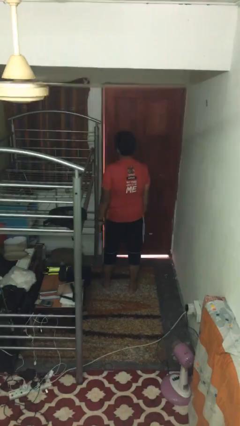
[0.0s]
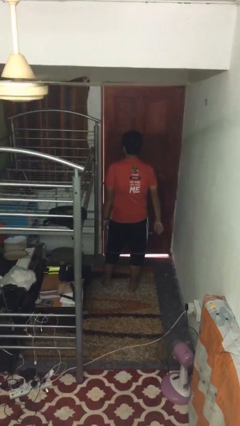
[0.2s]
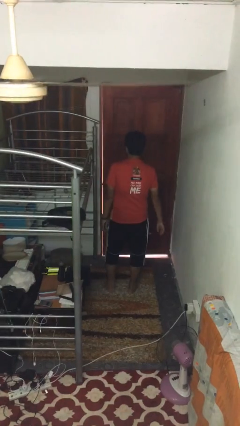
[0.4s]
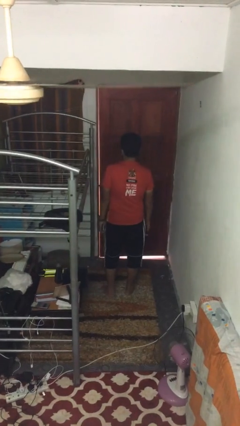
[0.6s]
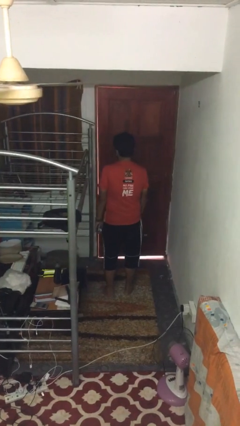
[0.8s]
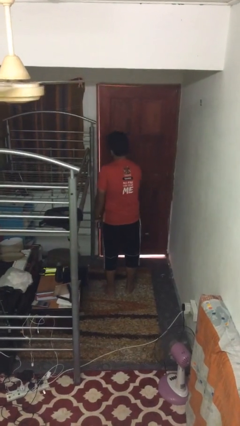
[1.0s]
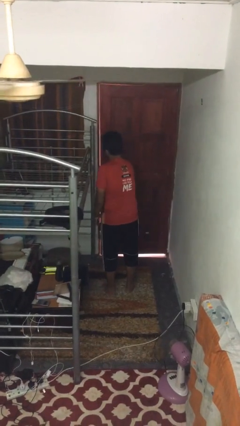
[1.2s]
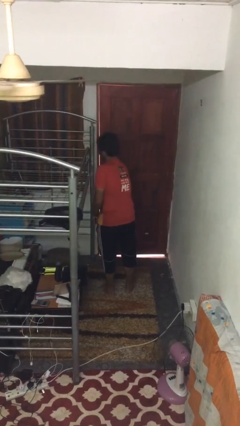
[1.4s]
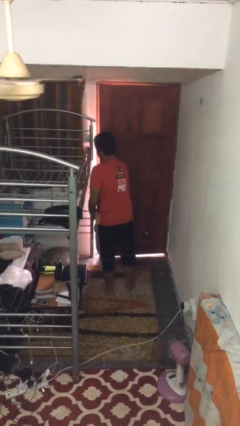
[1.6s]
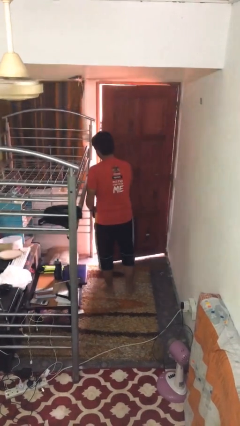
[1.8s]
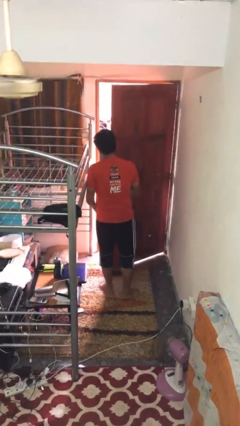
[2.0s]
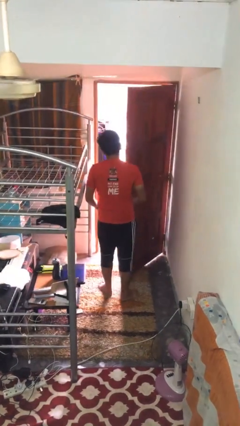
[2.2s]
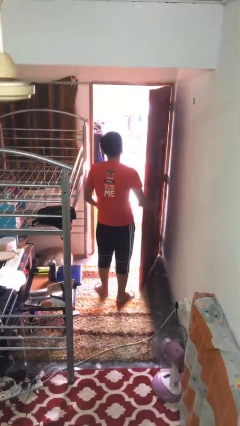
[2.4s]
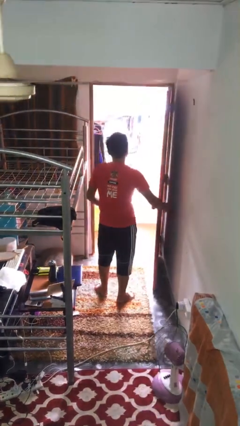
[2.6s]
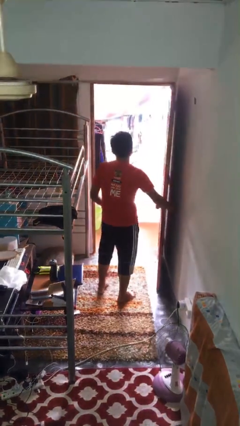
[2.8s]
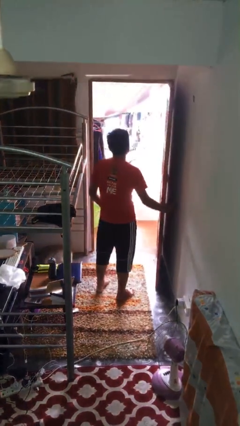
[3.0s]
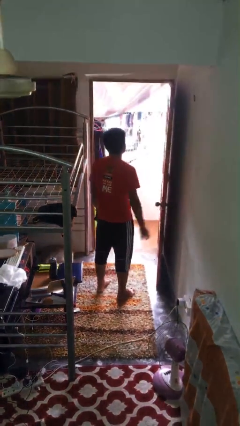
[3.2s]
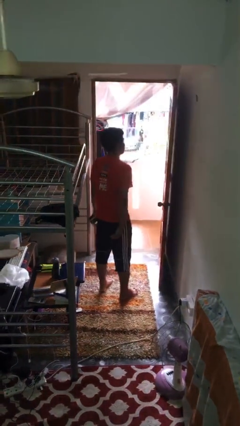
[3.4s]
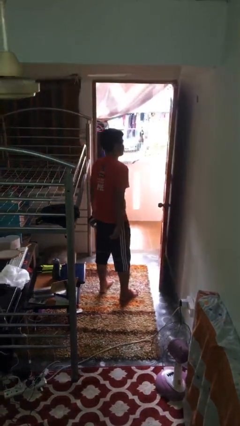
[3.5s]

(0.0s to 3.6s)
person opens facility door

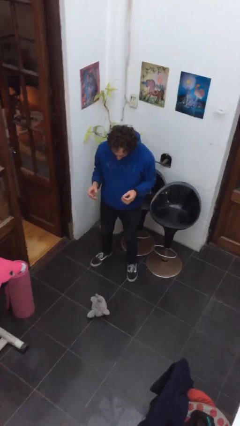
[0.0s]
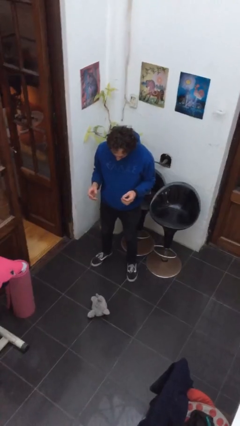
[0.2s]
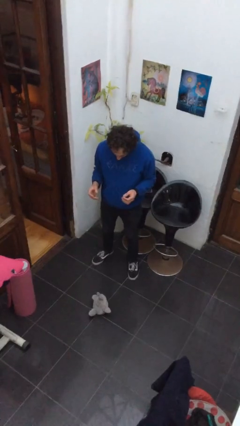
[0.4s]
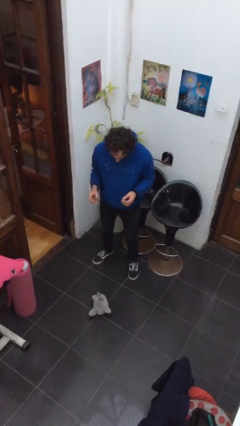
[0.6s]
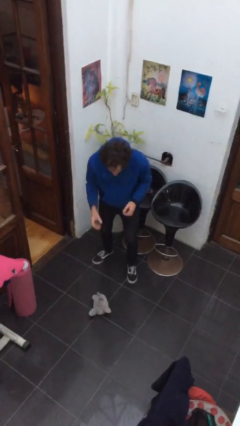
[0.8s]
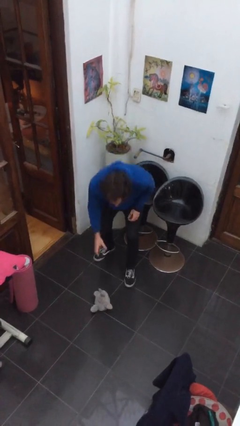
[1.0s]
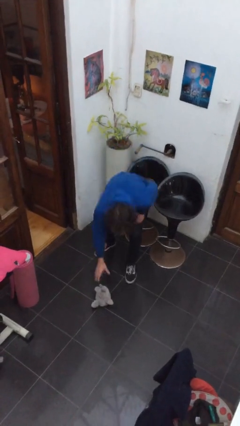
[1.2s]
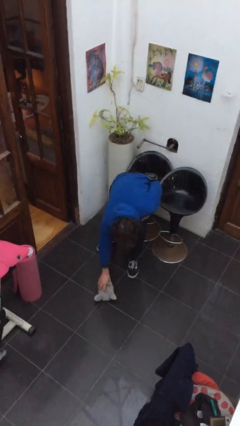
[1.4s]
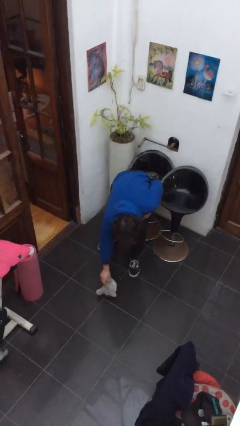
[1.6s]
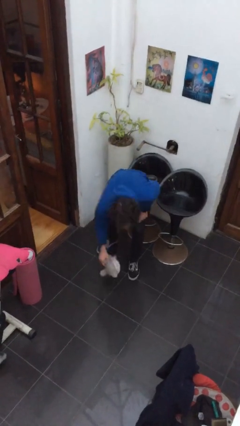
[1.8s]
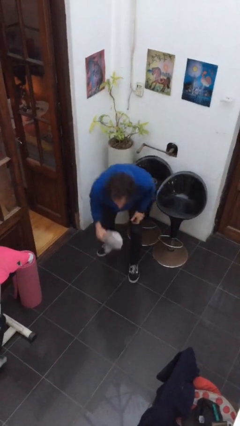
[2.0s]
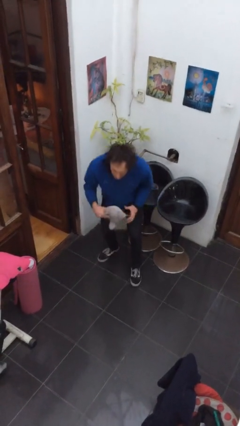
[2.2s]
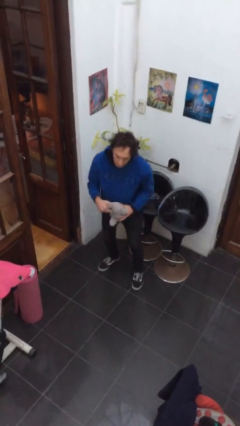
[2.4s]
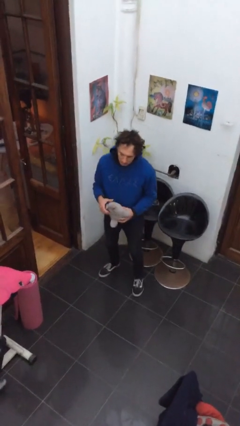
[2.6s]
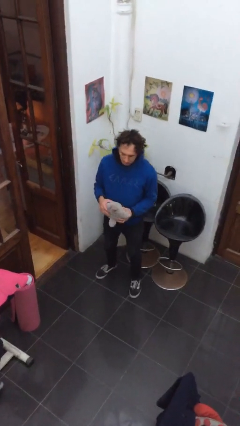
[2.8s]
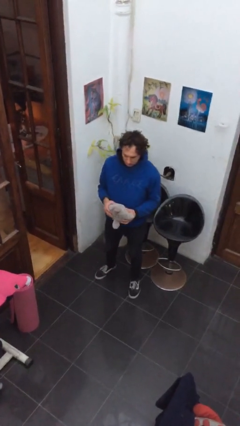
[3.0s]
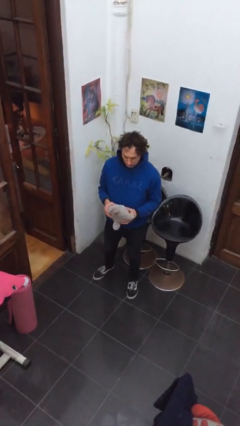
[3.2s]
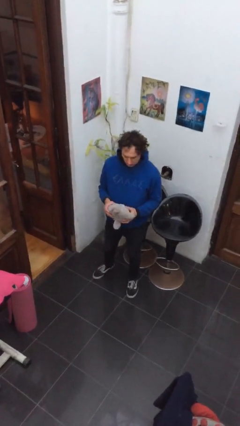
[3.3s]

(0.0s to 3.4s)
person picks up object from floor

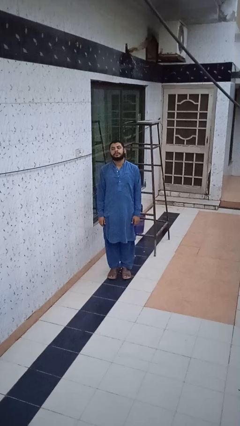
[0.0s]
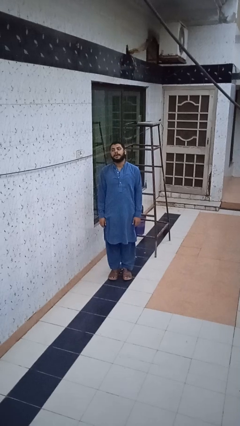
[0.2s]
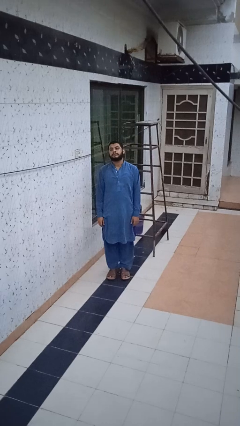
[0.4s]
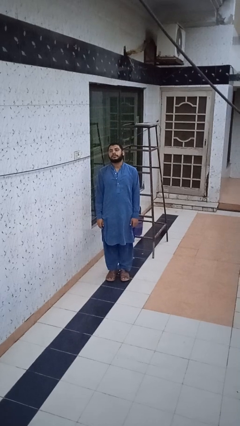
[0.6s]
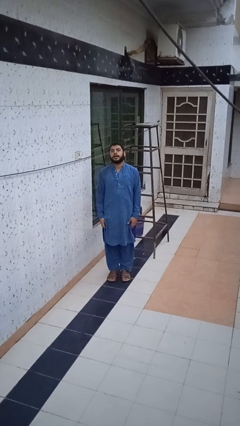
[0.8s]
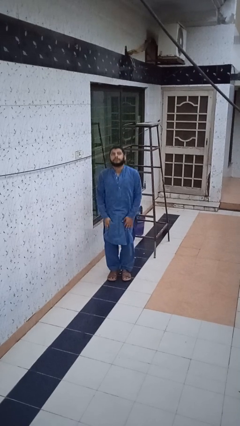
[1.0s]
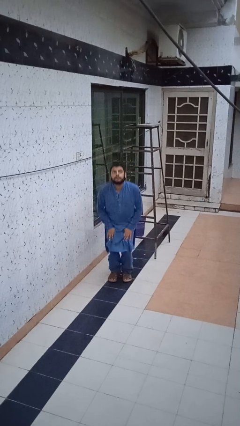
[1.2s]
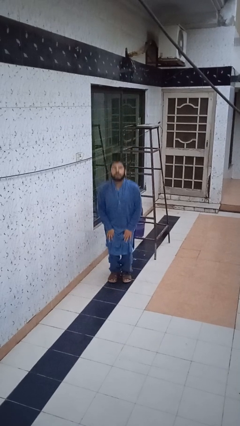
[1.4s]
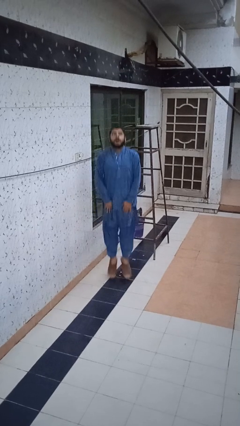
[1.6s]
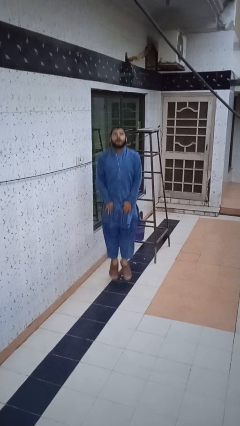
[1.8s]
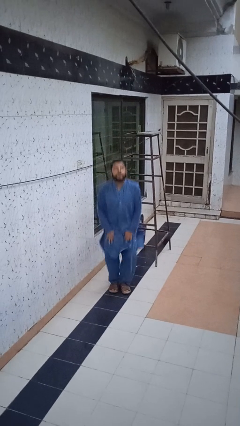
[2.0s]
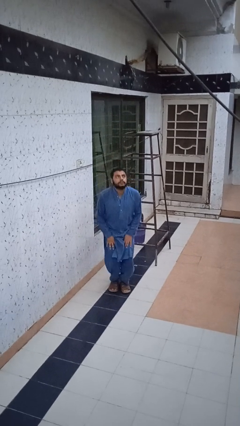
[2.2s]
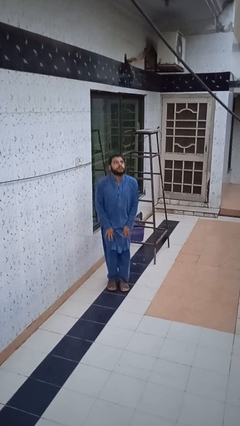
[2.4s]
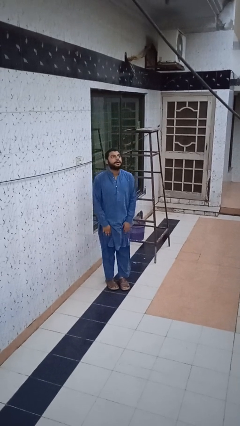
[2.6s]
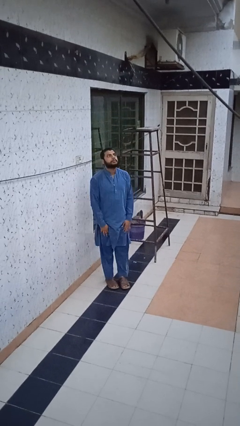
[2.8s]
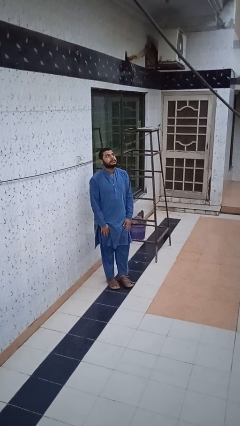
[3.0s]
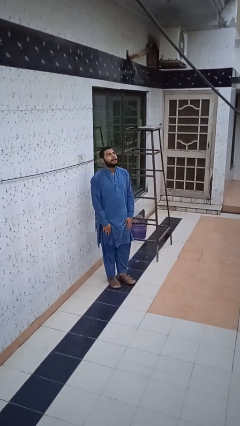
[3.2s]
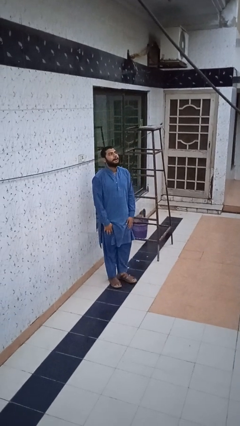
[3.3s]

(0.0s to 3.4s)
person jumps

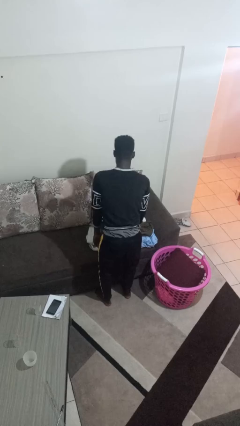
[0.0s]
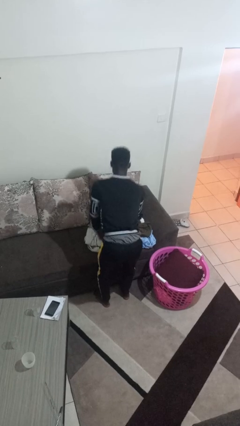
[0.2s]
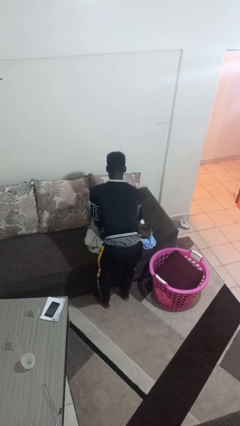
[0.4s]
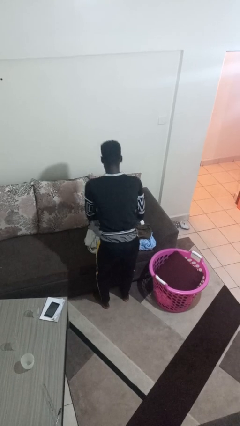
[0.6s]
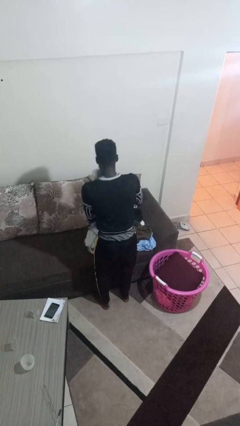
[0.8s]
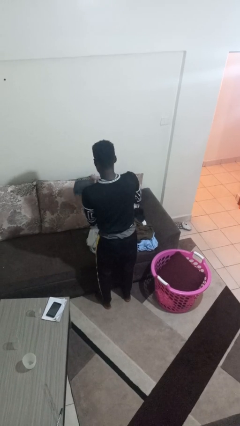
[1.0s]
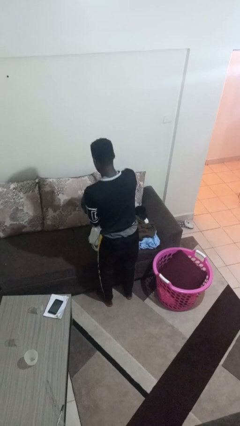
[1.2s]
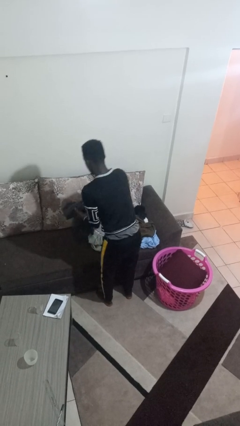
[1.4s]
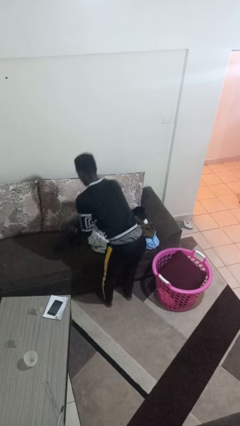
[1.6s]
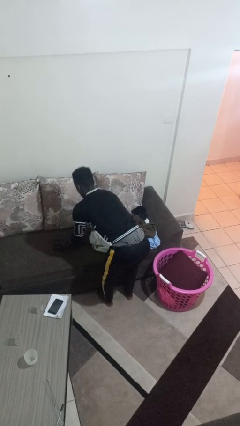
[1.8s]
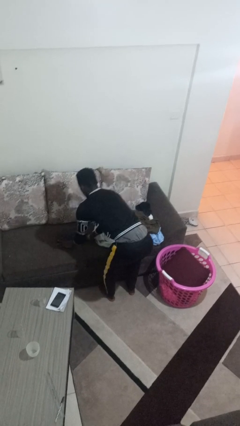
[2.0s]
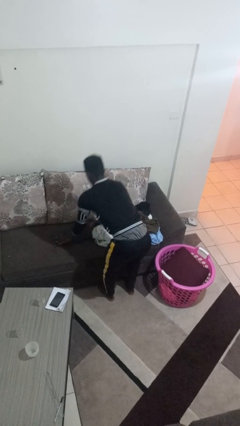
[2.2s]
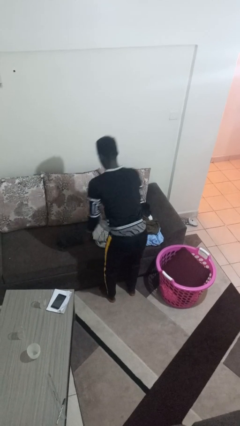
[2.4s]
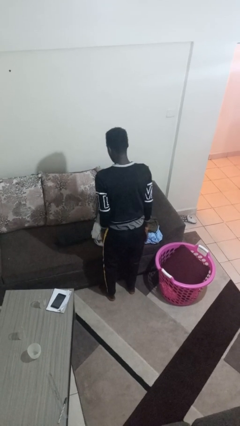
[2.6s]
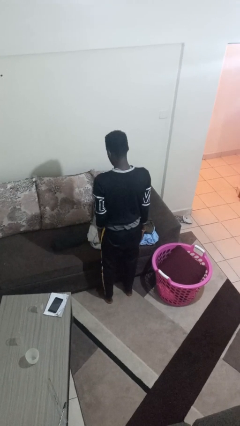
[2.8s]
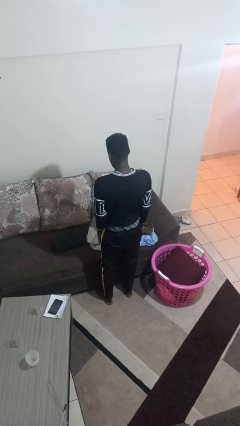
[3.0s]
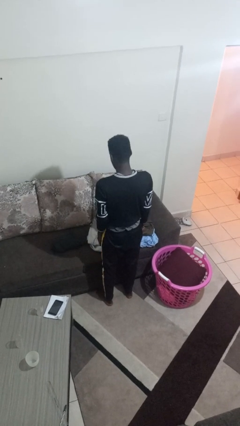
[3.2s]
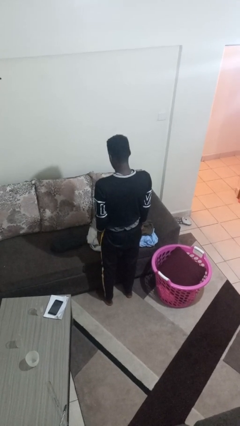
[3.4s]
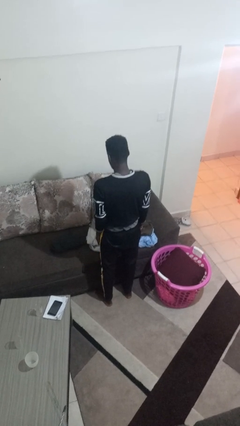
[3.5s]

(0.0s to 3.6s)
person folds pants

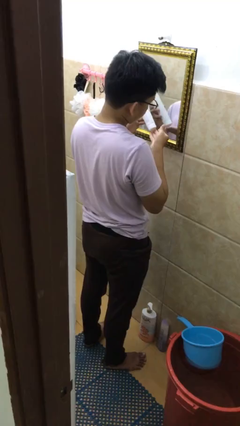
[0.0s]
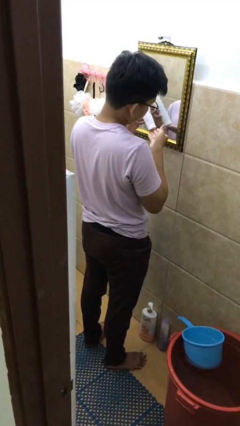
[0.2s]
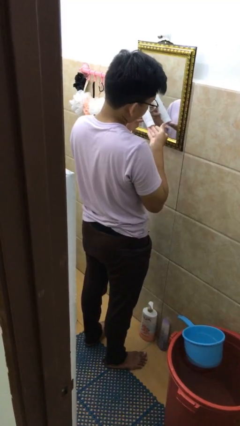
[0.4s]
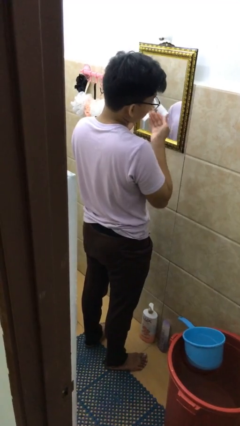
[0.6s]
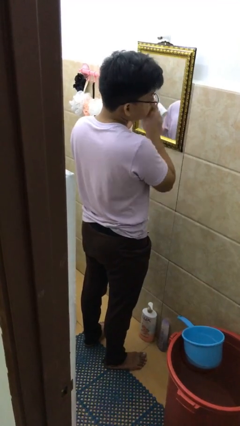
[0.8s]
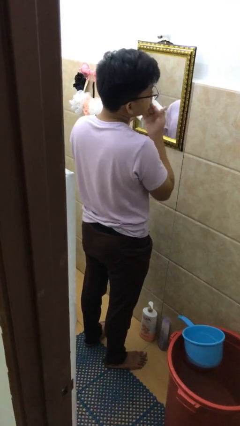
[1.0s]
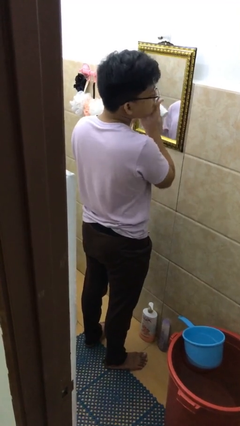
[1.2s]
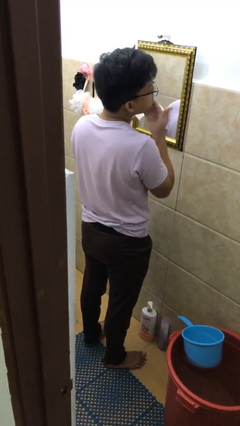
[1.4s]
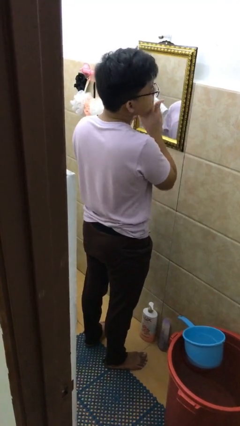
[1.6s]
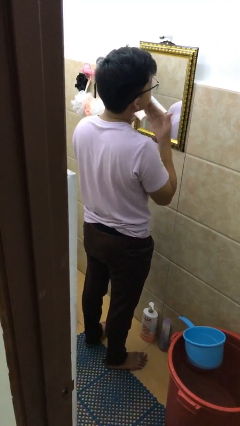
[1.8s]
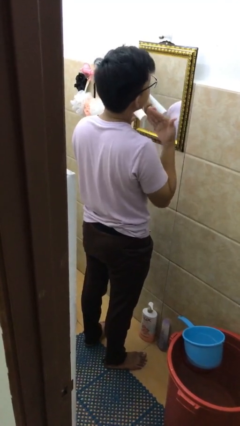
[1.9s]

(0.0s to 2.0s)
person applies facial moisturizer

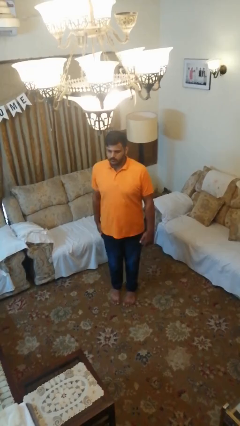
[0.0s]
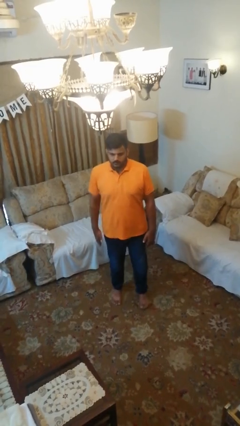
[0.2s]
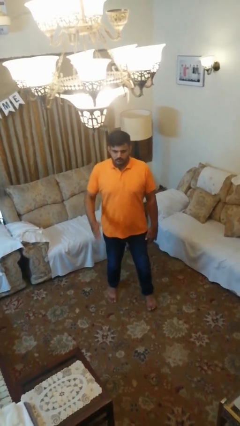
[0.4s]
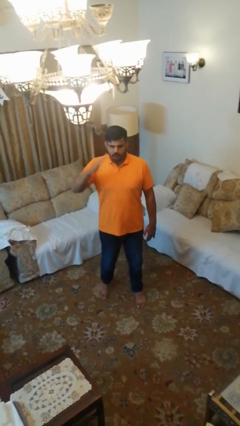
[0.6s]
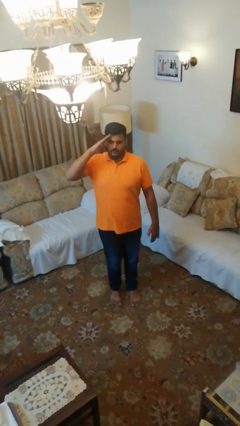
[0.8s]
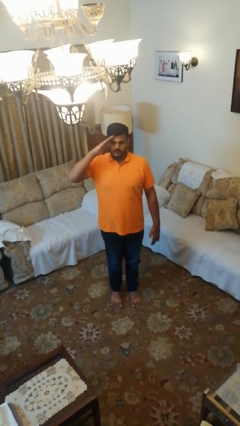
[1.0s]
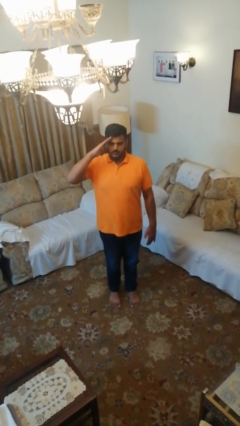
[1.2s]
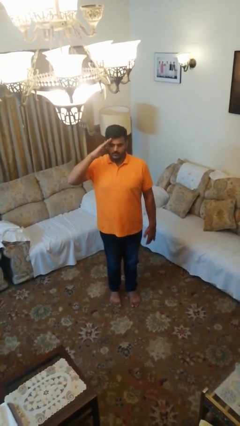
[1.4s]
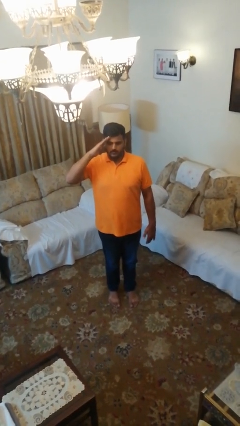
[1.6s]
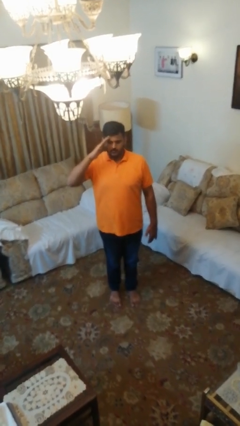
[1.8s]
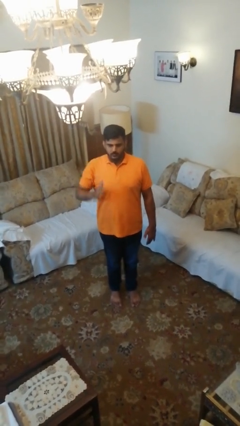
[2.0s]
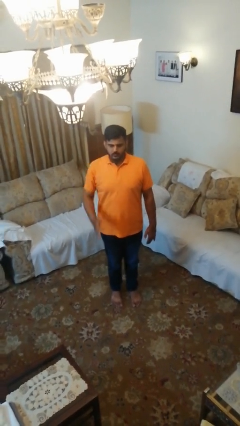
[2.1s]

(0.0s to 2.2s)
person salutes
